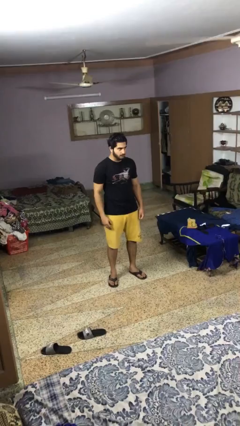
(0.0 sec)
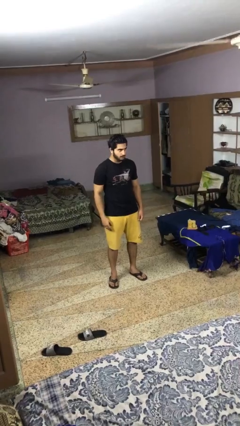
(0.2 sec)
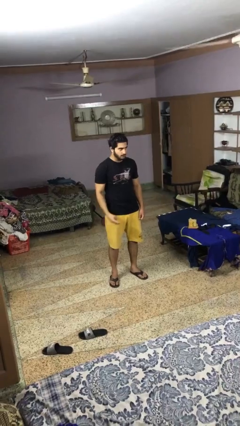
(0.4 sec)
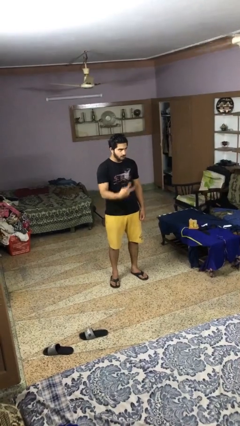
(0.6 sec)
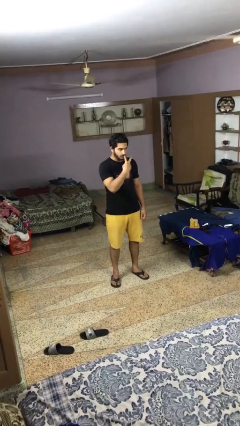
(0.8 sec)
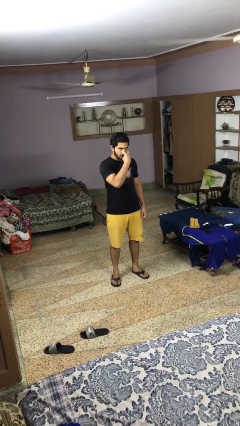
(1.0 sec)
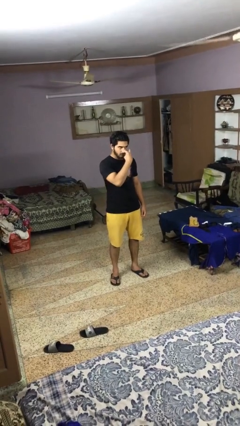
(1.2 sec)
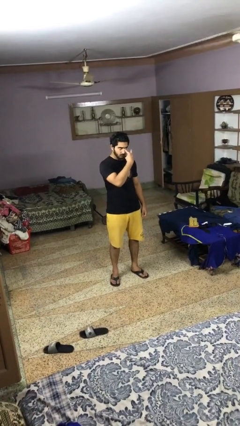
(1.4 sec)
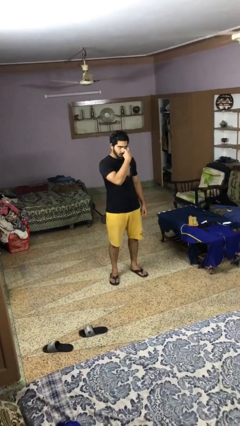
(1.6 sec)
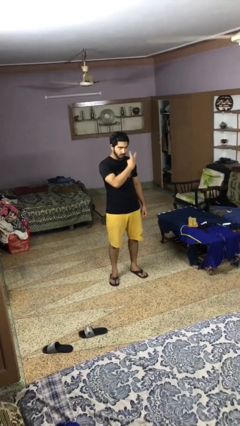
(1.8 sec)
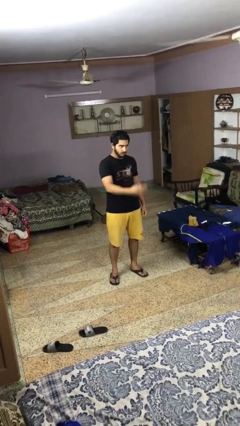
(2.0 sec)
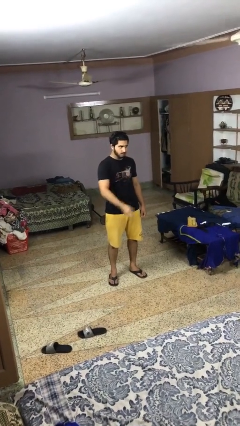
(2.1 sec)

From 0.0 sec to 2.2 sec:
person gestures watch closely

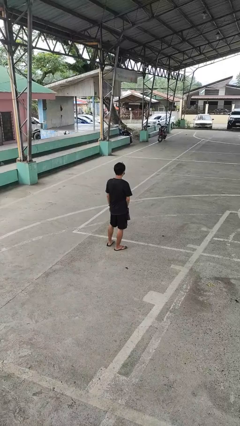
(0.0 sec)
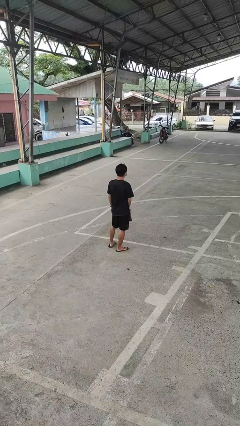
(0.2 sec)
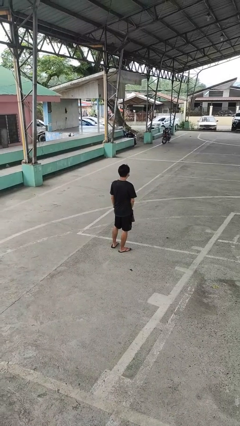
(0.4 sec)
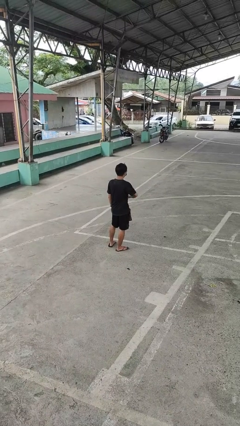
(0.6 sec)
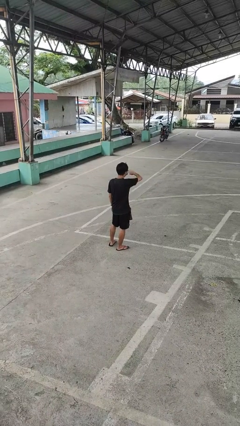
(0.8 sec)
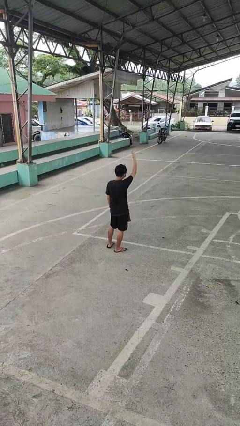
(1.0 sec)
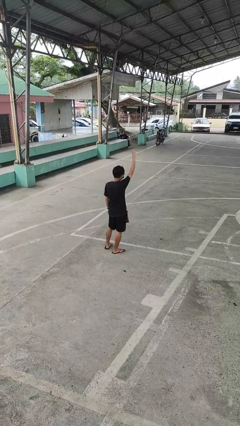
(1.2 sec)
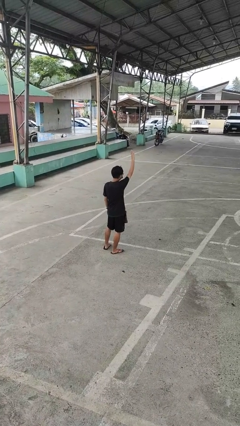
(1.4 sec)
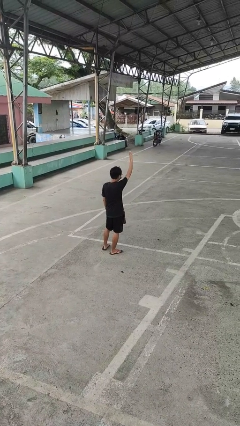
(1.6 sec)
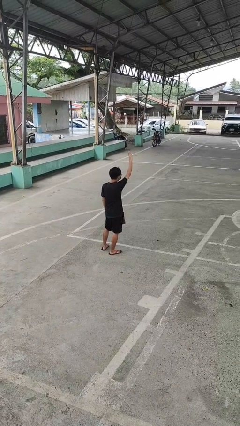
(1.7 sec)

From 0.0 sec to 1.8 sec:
person gestures swipe up

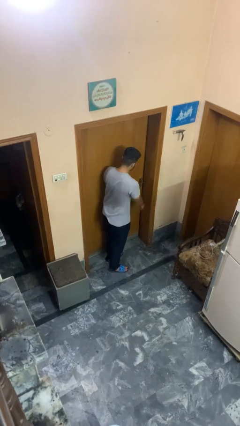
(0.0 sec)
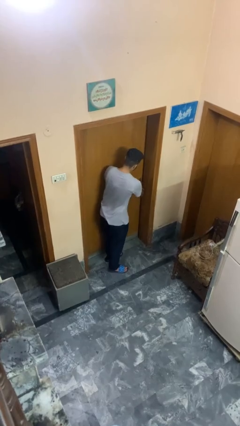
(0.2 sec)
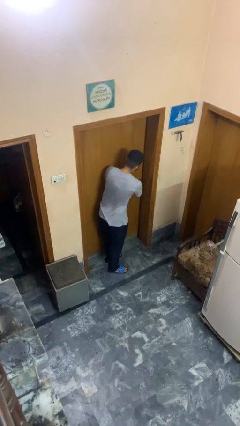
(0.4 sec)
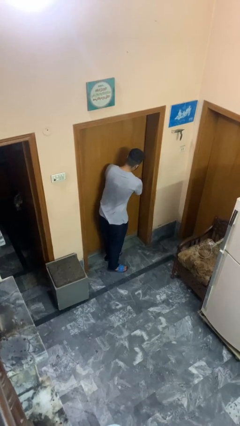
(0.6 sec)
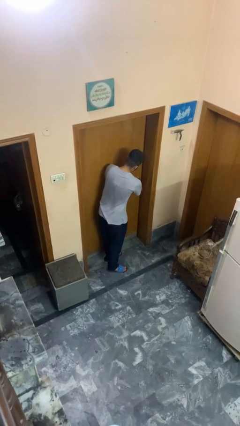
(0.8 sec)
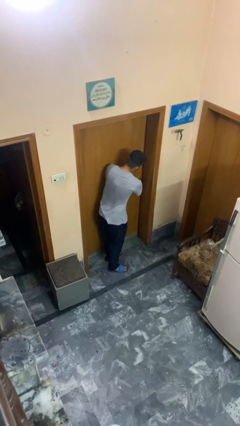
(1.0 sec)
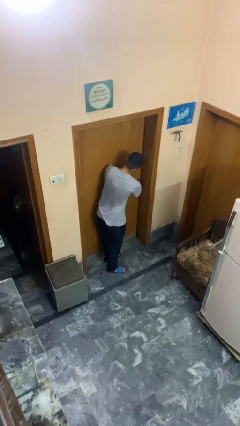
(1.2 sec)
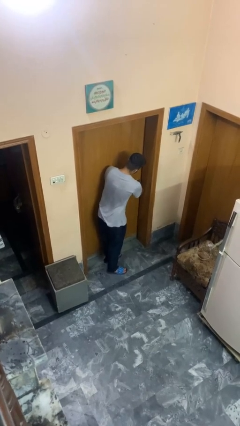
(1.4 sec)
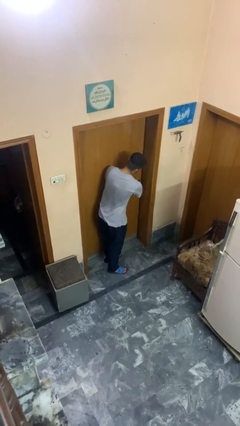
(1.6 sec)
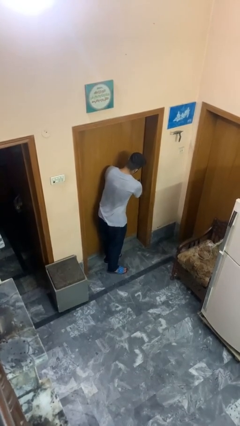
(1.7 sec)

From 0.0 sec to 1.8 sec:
person unlocks door with keys

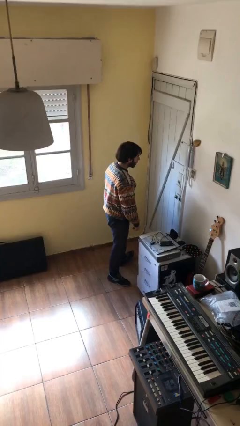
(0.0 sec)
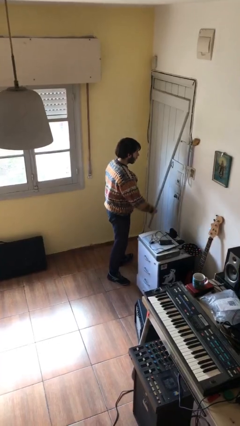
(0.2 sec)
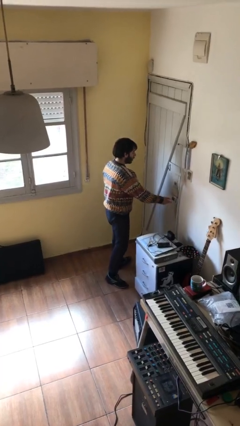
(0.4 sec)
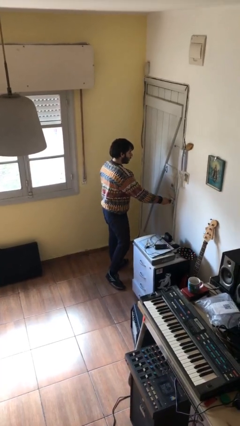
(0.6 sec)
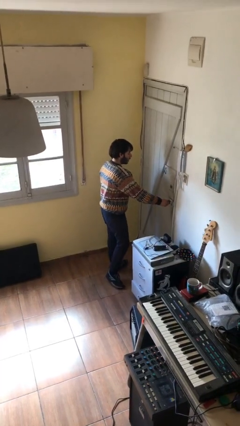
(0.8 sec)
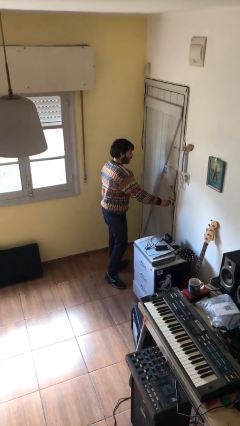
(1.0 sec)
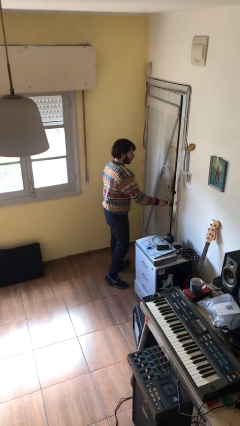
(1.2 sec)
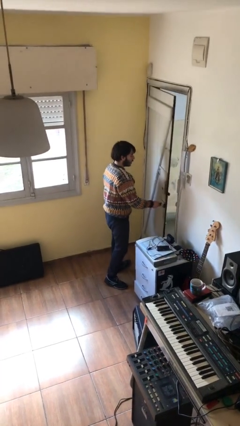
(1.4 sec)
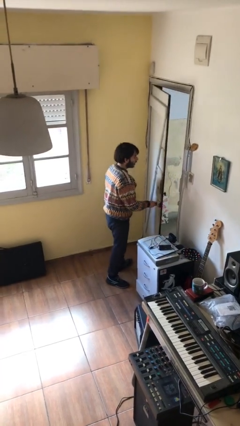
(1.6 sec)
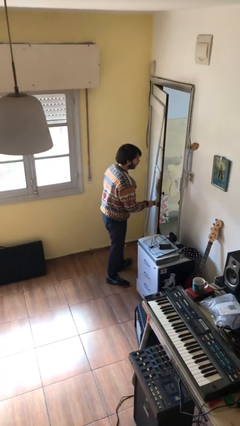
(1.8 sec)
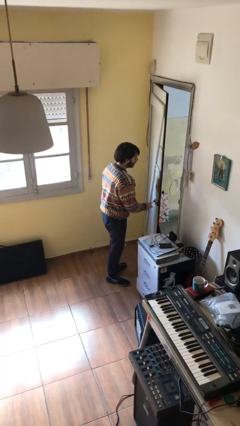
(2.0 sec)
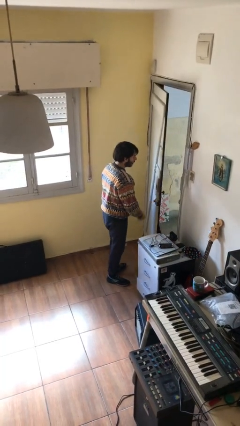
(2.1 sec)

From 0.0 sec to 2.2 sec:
person opens facility door

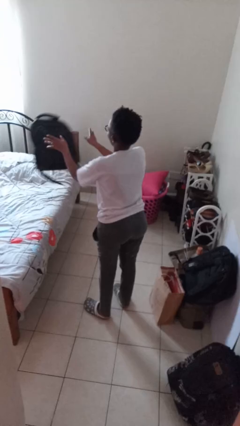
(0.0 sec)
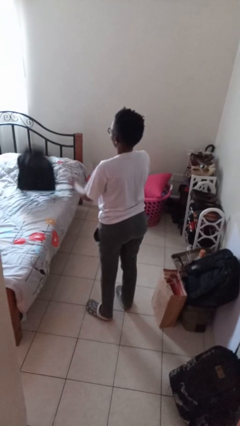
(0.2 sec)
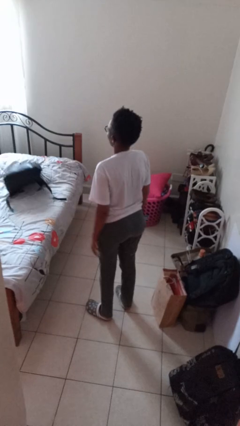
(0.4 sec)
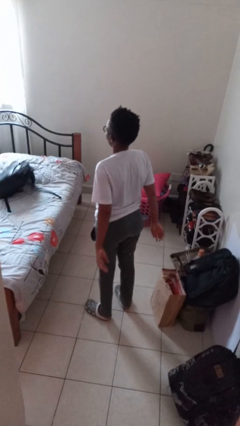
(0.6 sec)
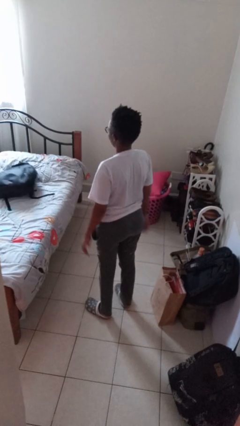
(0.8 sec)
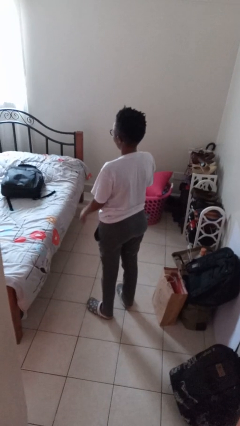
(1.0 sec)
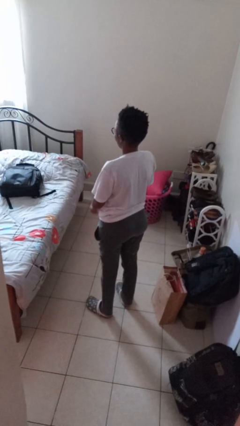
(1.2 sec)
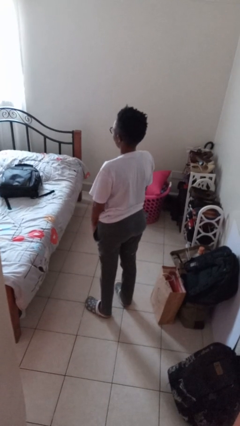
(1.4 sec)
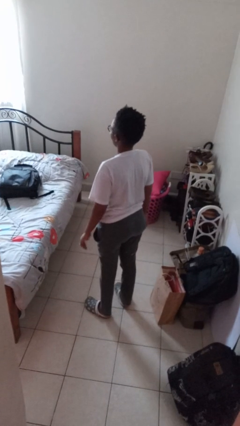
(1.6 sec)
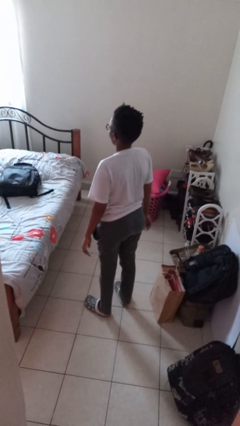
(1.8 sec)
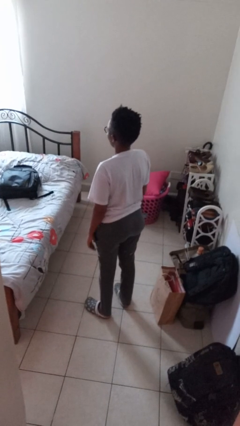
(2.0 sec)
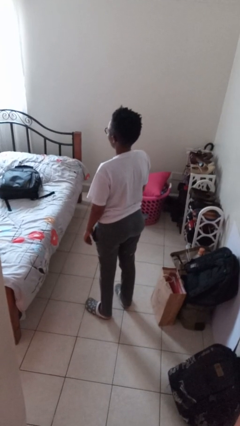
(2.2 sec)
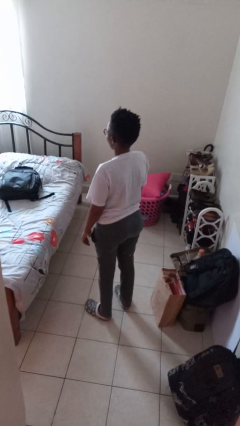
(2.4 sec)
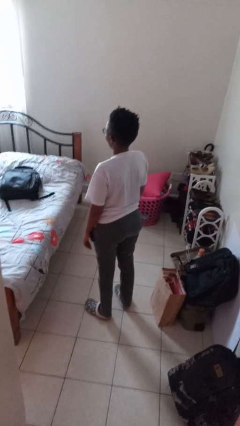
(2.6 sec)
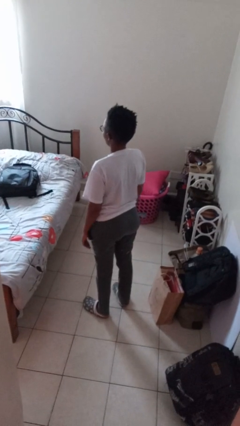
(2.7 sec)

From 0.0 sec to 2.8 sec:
person throws object on bed

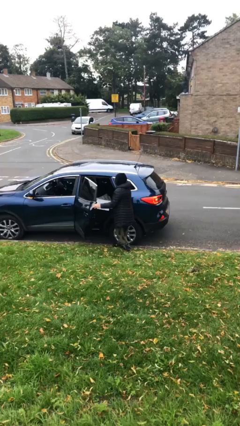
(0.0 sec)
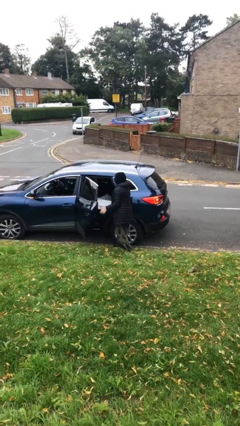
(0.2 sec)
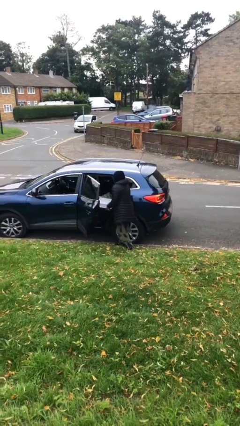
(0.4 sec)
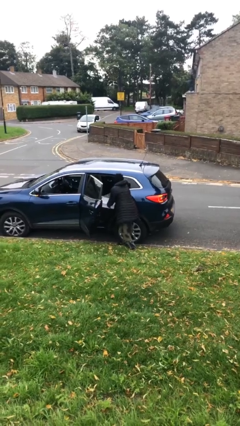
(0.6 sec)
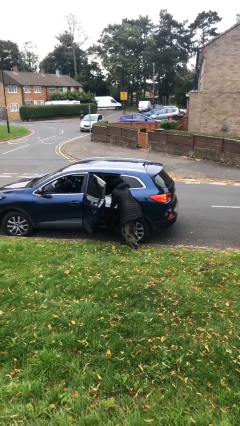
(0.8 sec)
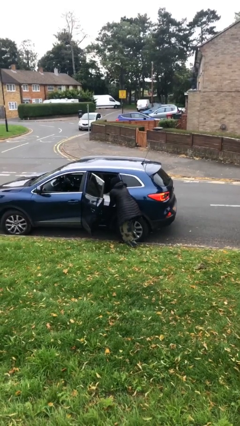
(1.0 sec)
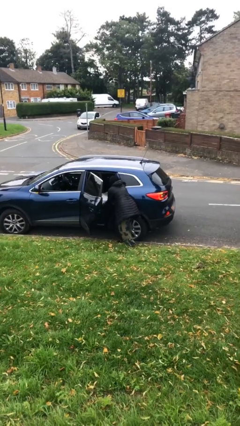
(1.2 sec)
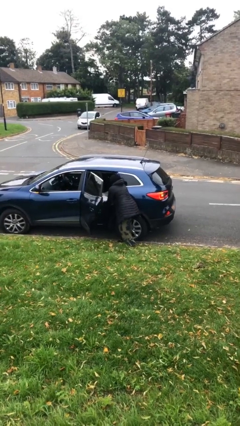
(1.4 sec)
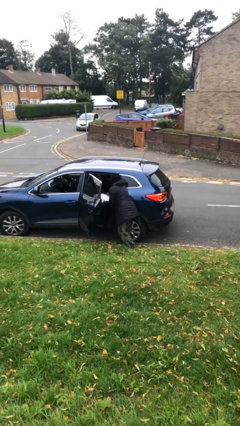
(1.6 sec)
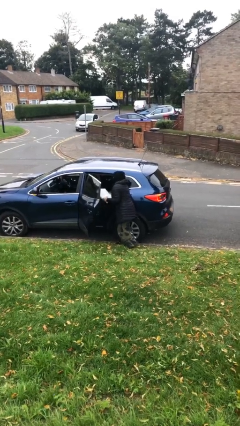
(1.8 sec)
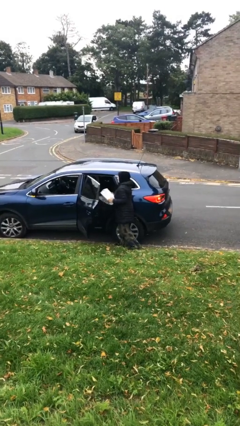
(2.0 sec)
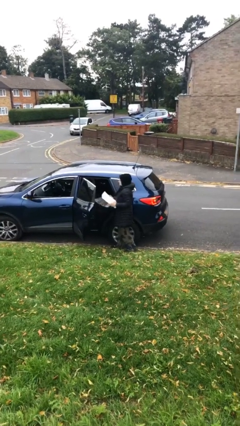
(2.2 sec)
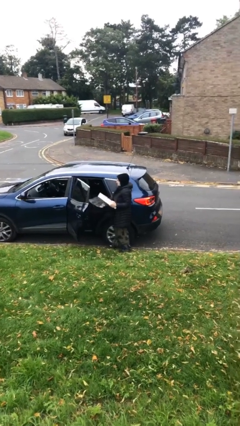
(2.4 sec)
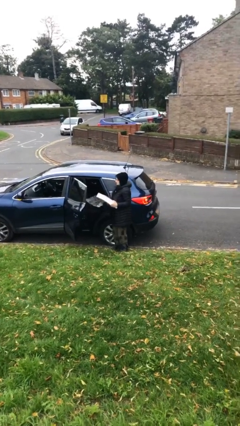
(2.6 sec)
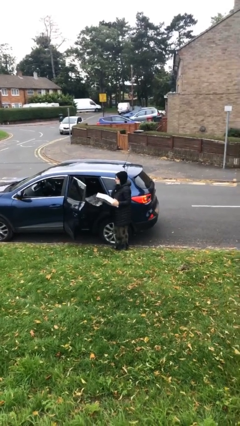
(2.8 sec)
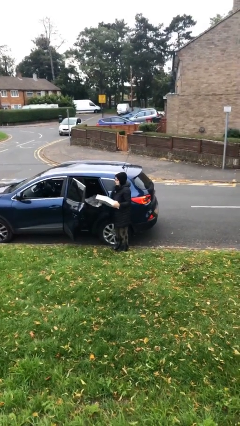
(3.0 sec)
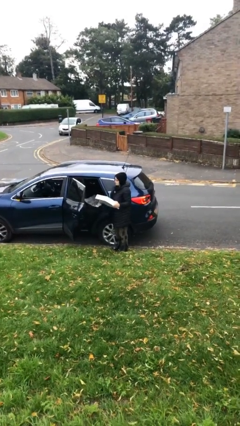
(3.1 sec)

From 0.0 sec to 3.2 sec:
person unloads car

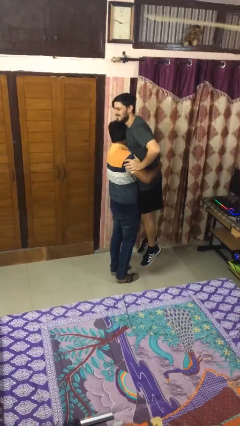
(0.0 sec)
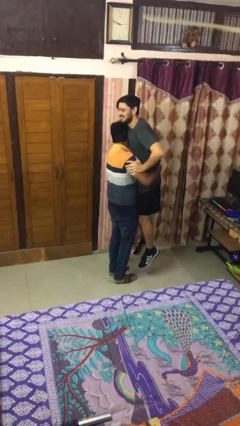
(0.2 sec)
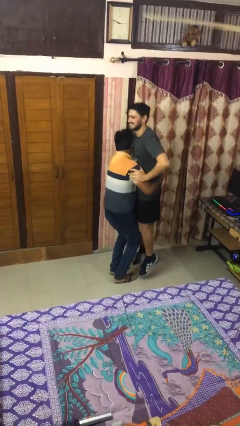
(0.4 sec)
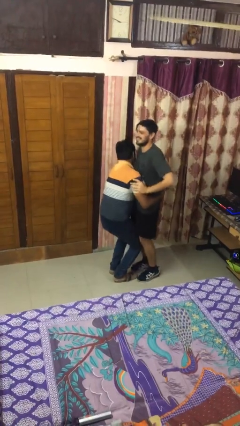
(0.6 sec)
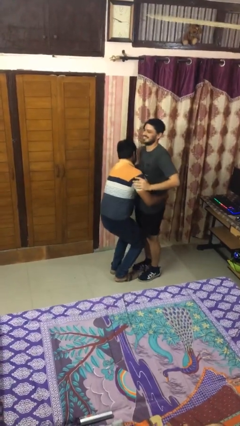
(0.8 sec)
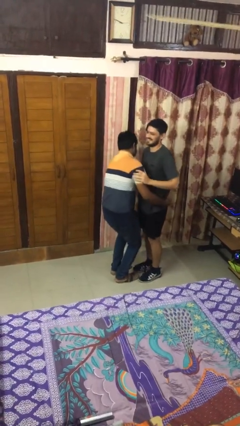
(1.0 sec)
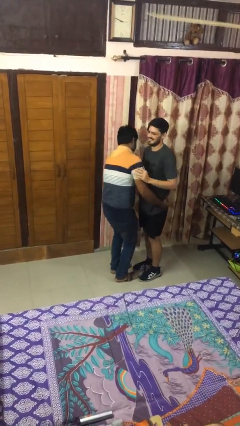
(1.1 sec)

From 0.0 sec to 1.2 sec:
person puts down person

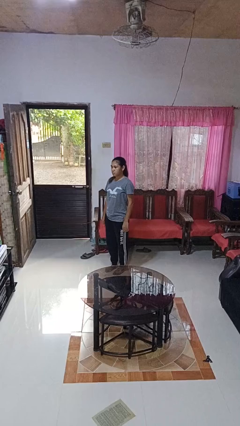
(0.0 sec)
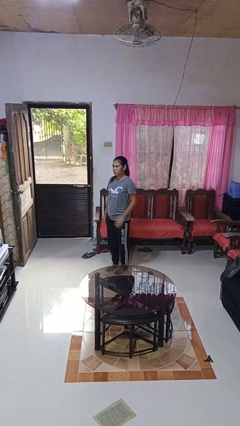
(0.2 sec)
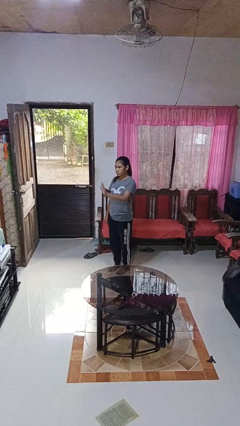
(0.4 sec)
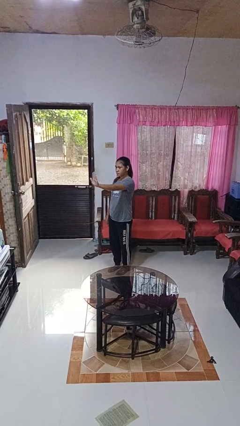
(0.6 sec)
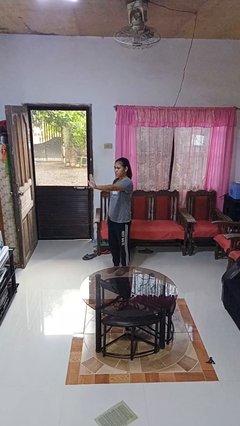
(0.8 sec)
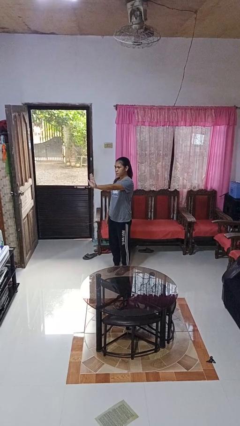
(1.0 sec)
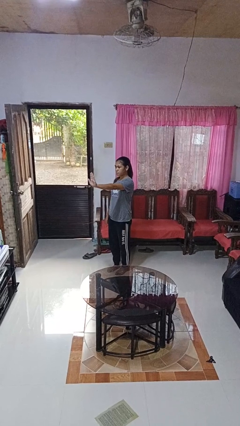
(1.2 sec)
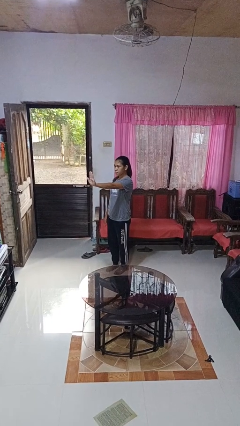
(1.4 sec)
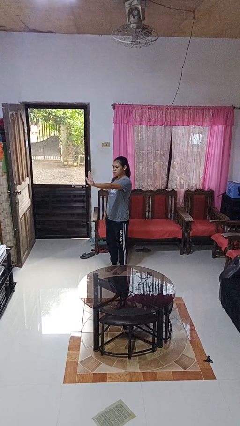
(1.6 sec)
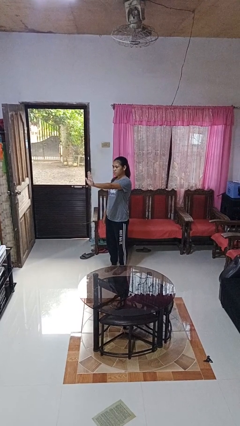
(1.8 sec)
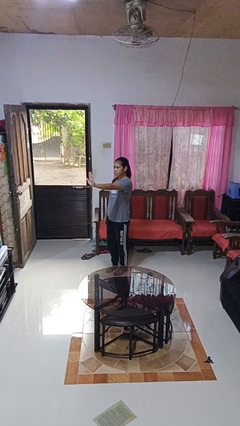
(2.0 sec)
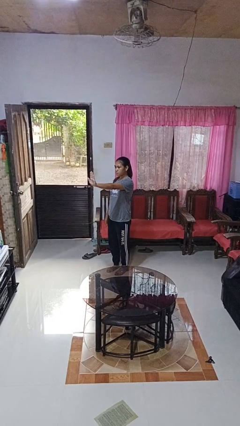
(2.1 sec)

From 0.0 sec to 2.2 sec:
person gestures stop
